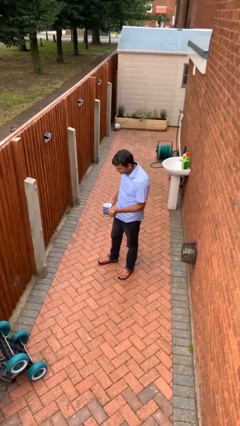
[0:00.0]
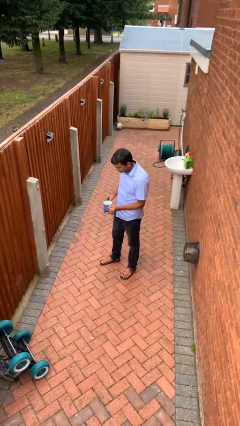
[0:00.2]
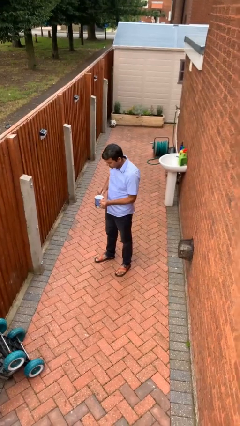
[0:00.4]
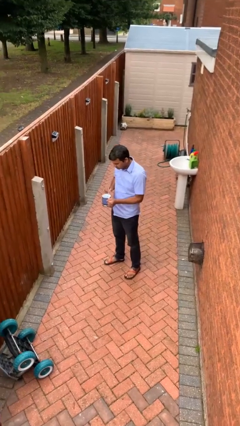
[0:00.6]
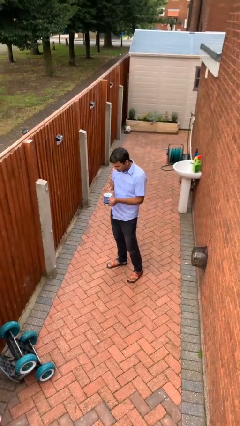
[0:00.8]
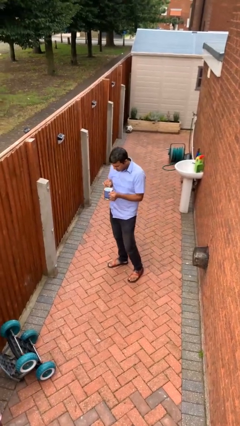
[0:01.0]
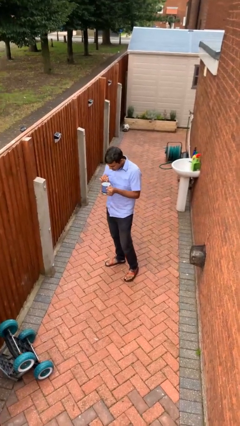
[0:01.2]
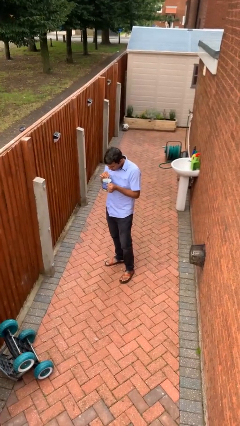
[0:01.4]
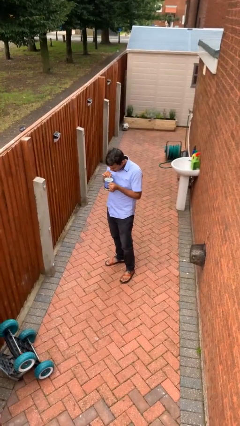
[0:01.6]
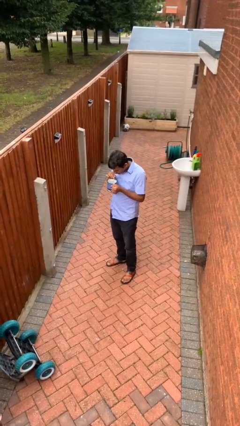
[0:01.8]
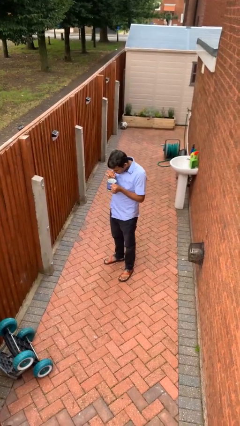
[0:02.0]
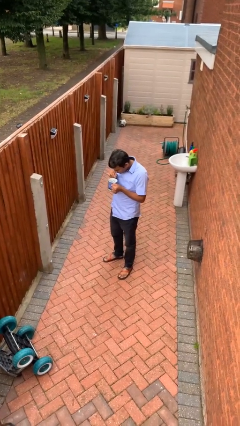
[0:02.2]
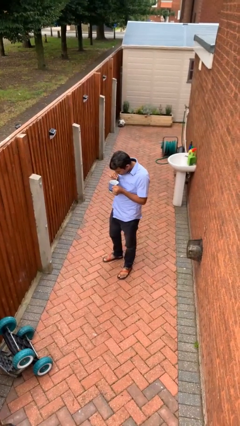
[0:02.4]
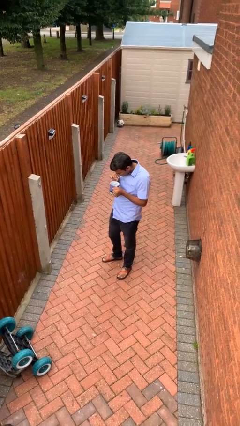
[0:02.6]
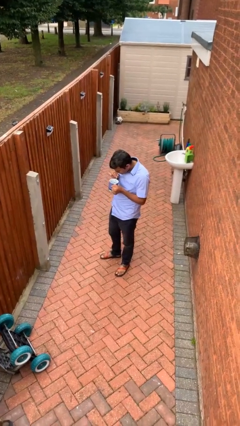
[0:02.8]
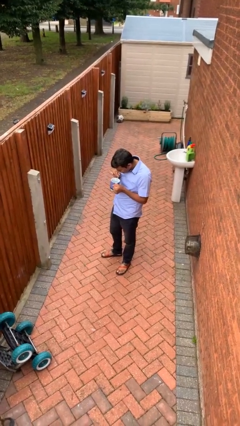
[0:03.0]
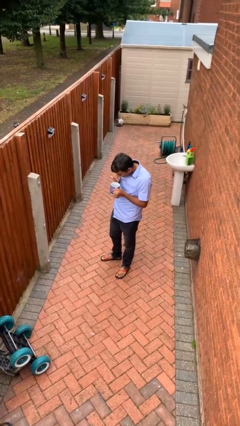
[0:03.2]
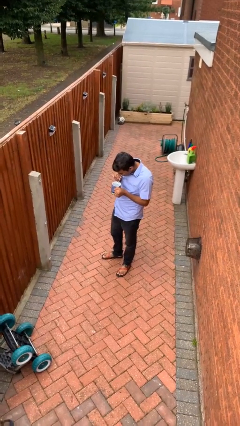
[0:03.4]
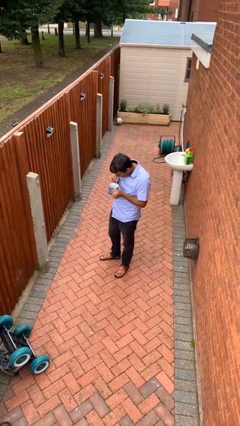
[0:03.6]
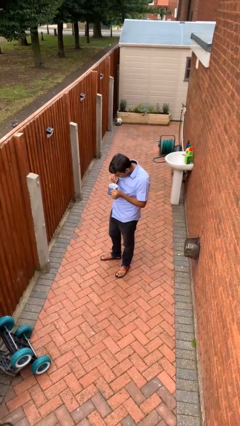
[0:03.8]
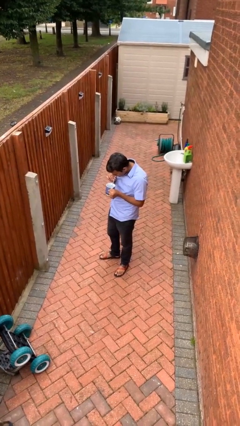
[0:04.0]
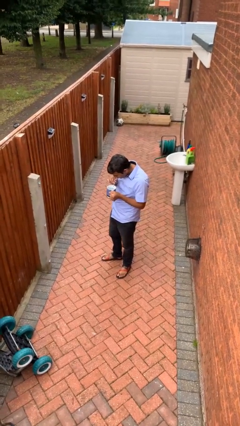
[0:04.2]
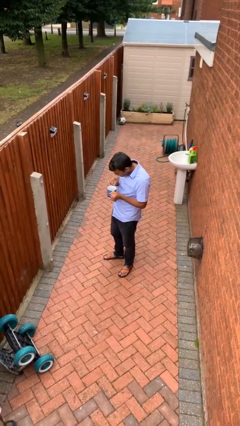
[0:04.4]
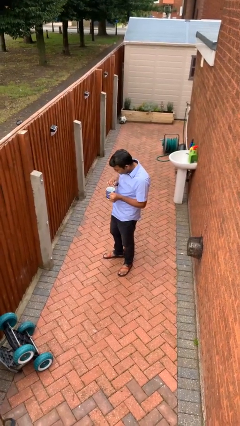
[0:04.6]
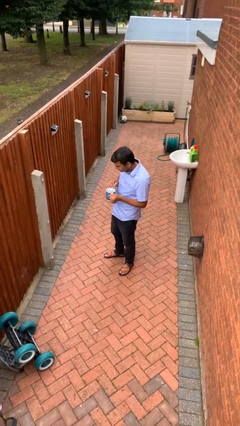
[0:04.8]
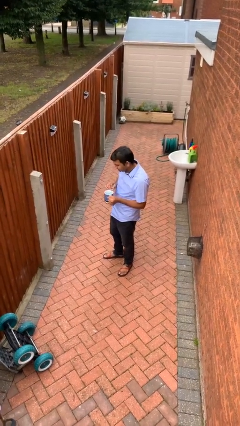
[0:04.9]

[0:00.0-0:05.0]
person drinks from straw

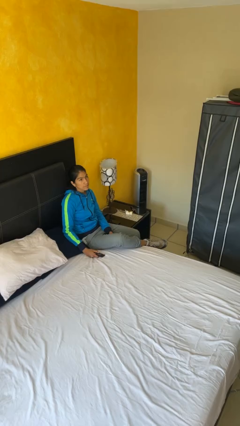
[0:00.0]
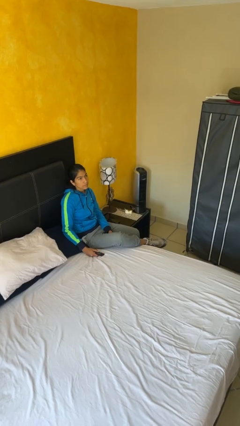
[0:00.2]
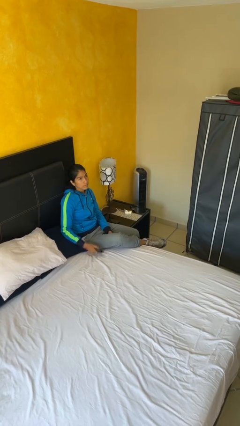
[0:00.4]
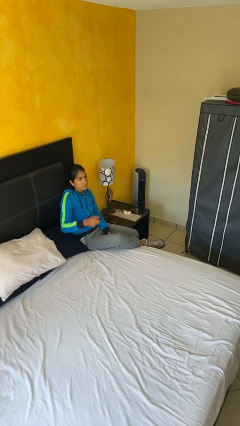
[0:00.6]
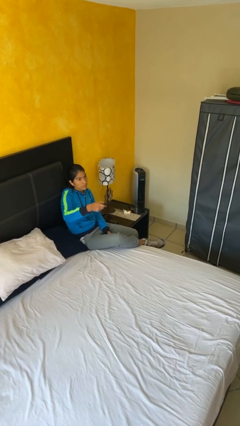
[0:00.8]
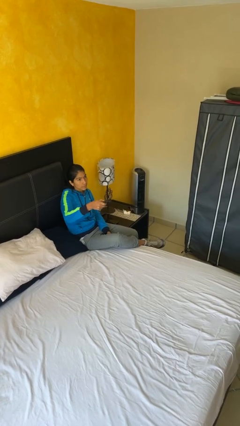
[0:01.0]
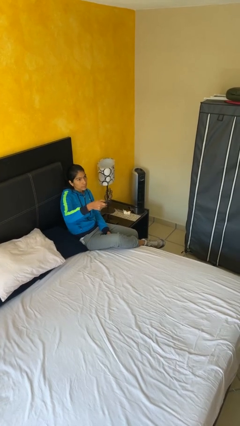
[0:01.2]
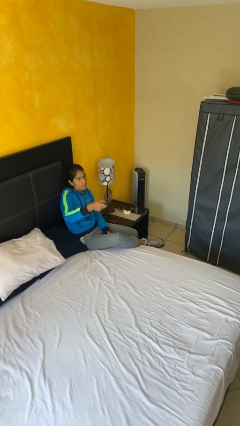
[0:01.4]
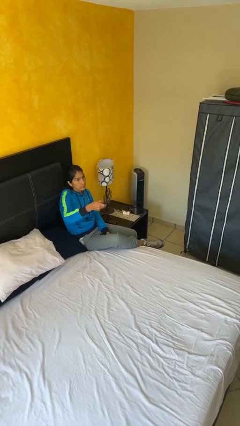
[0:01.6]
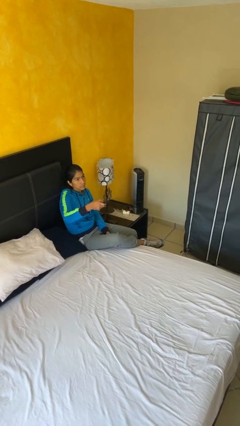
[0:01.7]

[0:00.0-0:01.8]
person uses television remote

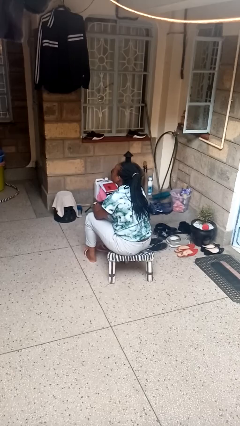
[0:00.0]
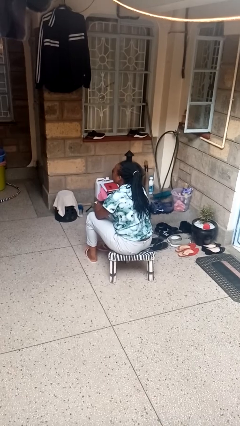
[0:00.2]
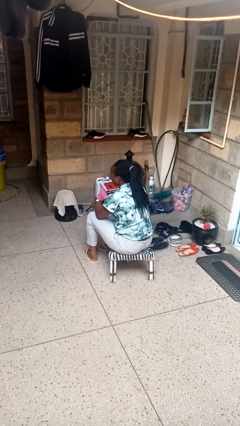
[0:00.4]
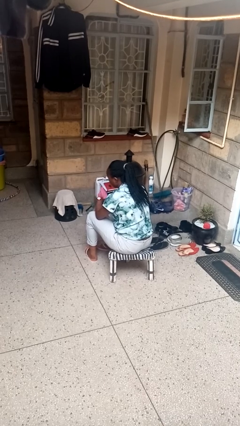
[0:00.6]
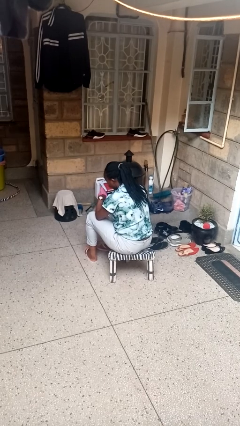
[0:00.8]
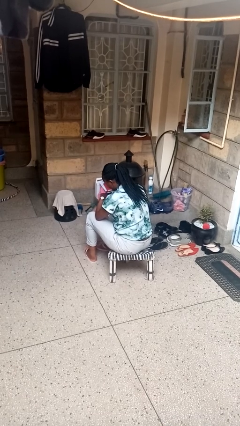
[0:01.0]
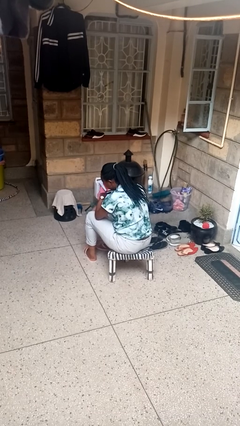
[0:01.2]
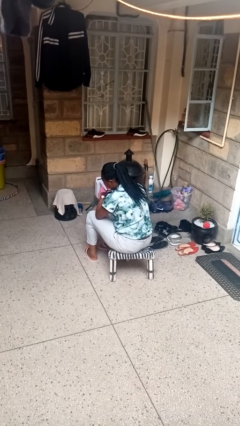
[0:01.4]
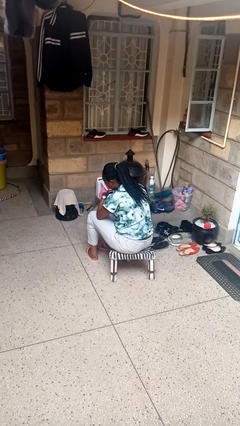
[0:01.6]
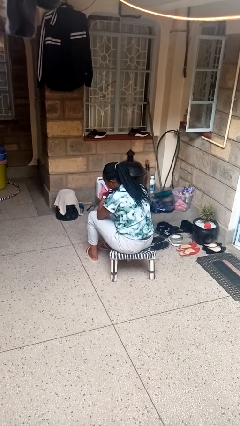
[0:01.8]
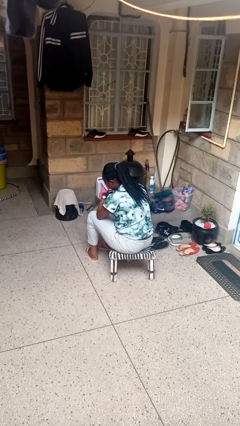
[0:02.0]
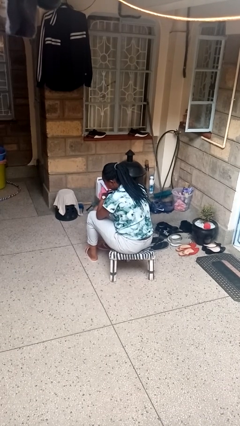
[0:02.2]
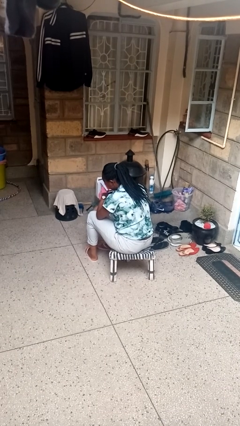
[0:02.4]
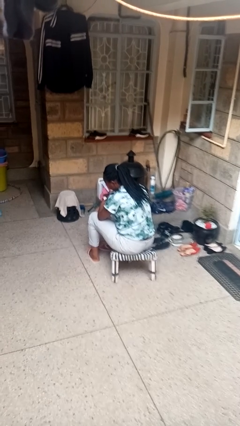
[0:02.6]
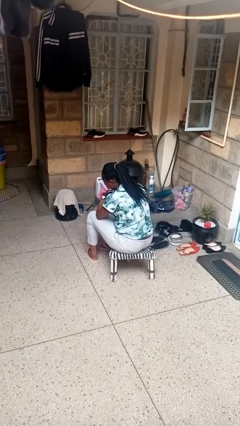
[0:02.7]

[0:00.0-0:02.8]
person looks at wristwatch

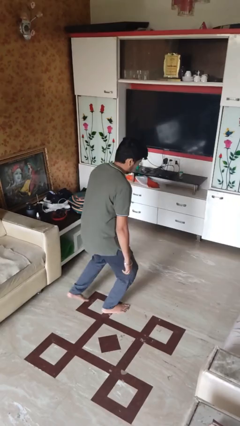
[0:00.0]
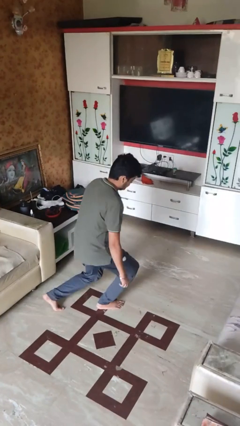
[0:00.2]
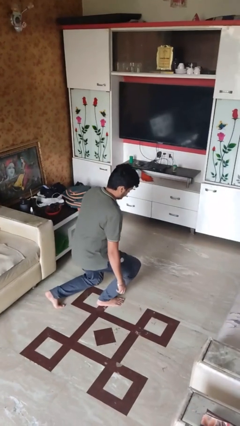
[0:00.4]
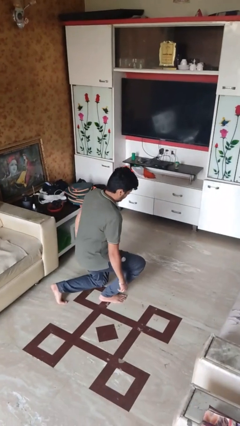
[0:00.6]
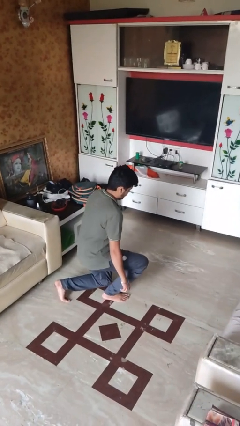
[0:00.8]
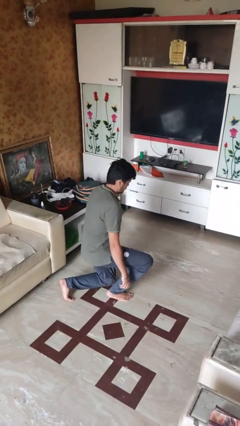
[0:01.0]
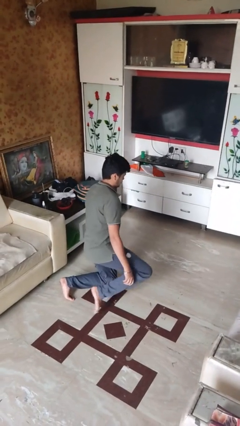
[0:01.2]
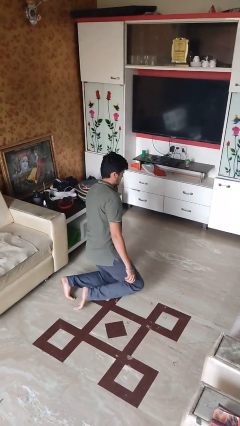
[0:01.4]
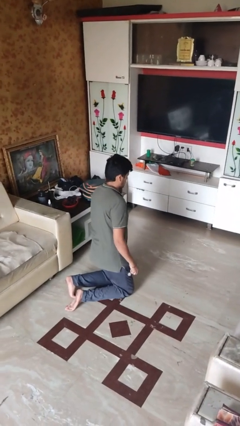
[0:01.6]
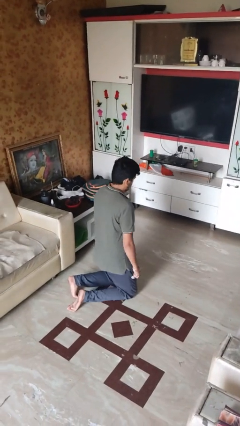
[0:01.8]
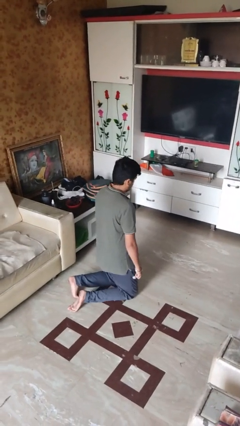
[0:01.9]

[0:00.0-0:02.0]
person kneels

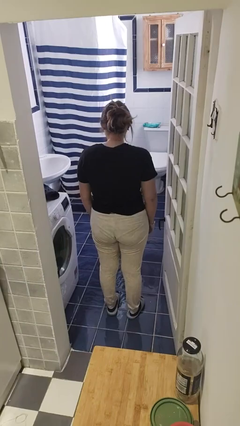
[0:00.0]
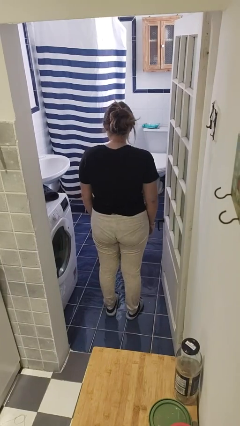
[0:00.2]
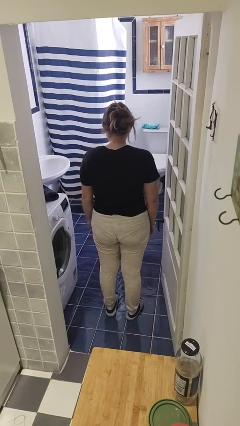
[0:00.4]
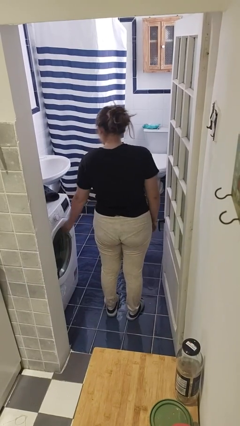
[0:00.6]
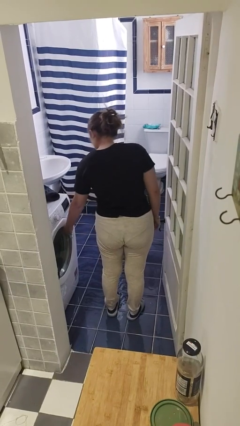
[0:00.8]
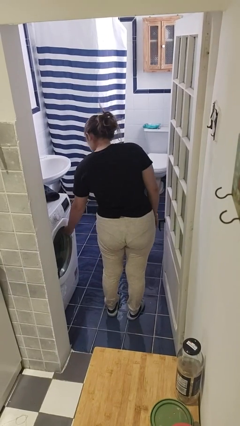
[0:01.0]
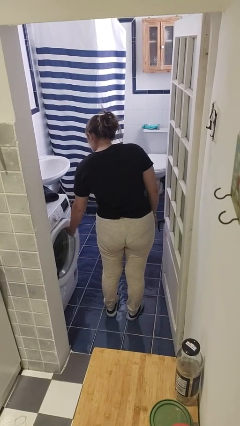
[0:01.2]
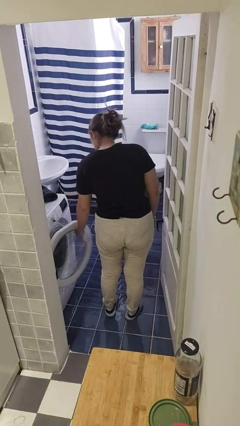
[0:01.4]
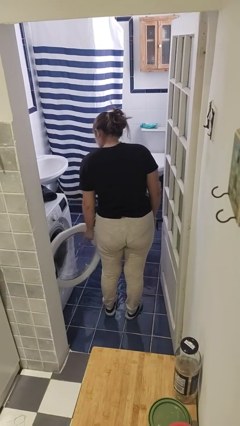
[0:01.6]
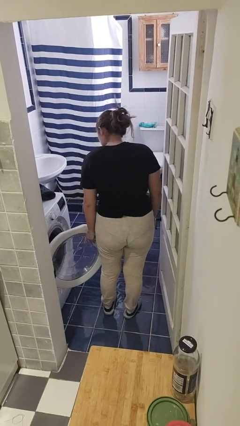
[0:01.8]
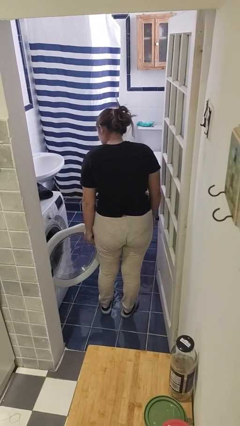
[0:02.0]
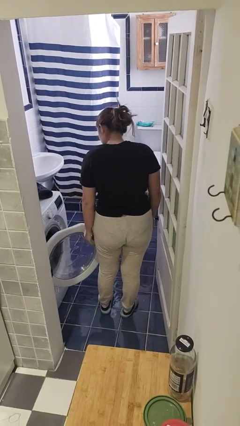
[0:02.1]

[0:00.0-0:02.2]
person opens clothes washer

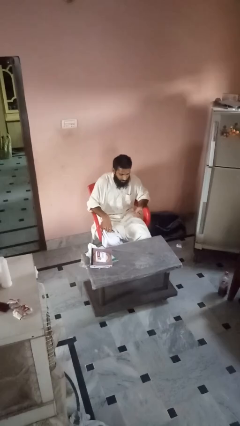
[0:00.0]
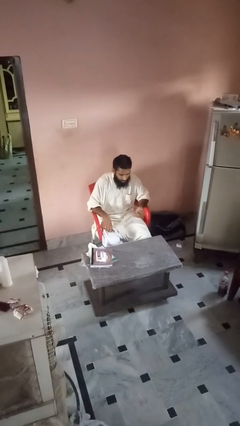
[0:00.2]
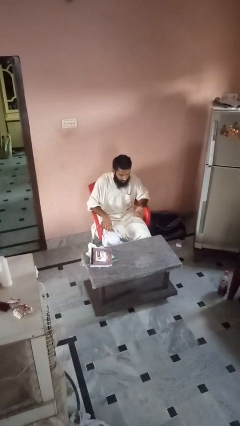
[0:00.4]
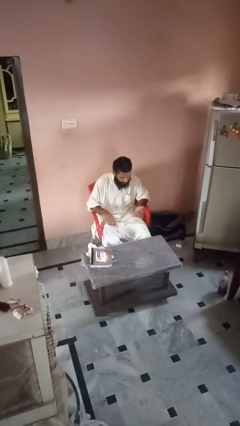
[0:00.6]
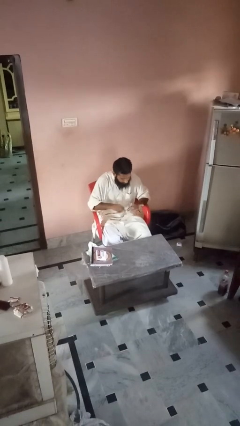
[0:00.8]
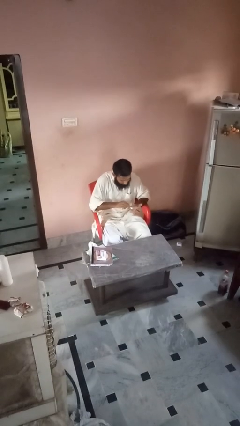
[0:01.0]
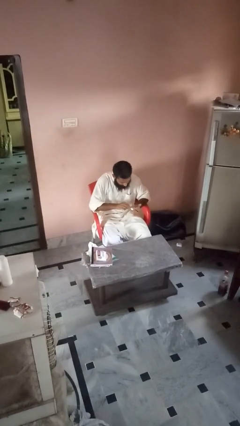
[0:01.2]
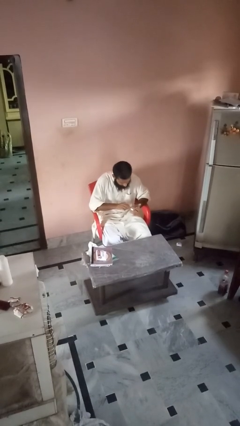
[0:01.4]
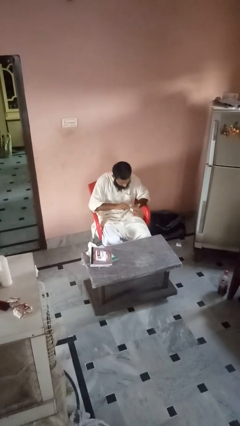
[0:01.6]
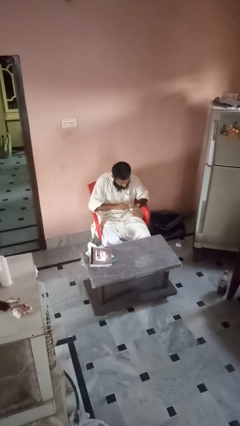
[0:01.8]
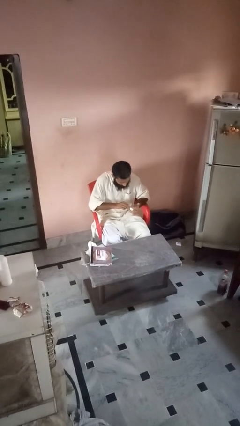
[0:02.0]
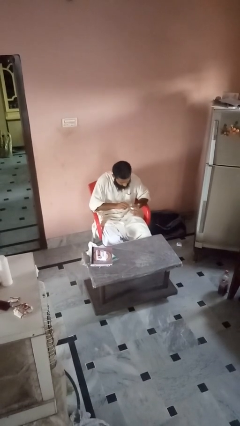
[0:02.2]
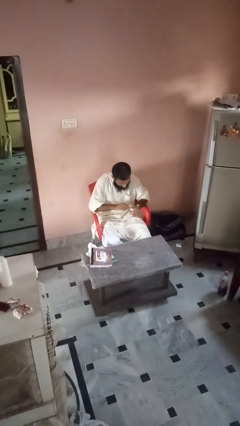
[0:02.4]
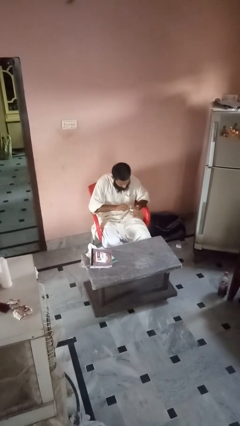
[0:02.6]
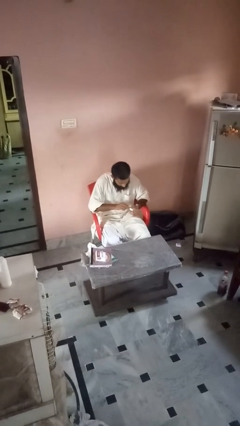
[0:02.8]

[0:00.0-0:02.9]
person clips fingernails

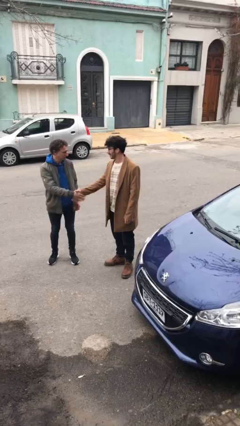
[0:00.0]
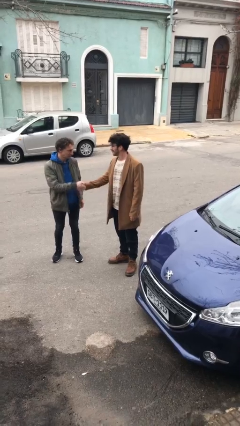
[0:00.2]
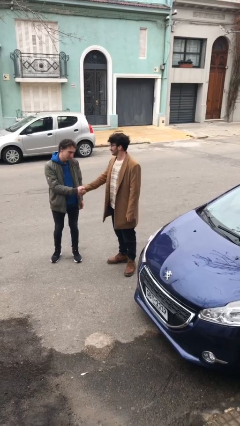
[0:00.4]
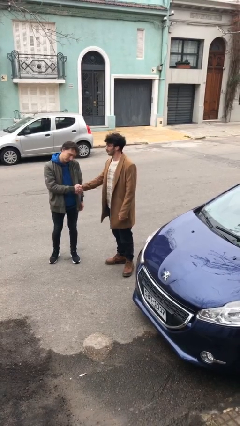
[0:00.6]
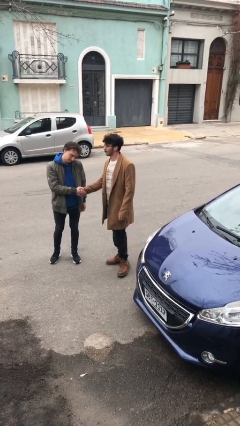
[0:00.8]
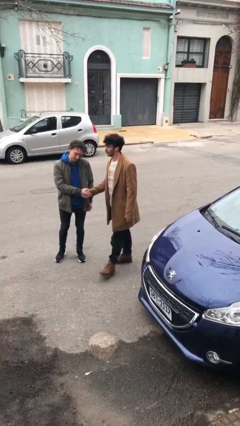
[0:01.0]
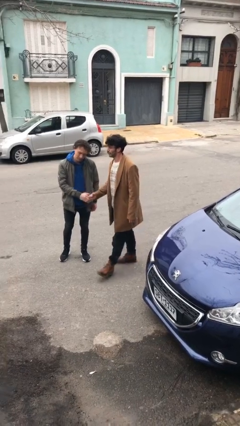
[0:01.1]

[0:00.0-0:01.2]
person shakes hand
